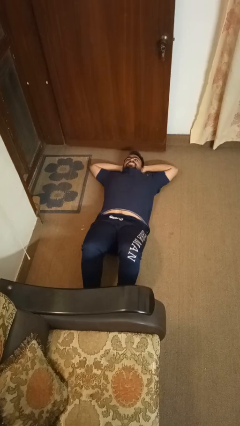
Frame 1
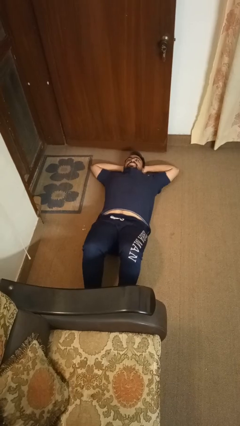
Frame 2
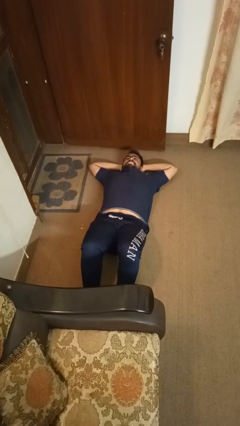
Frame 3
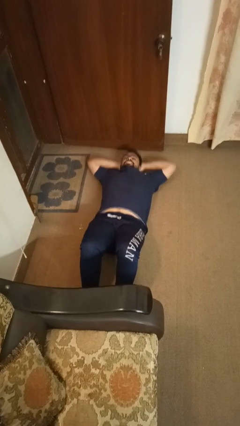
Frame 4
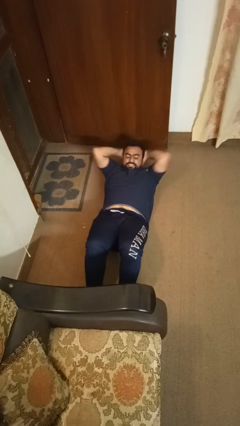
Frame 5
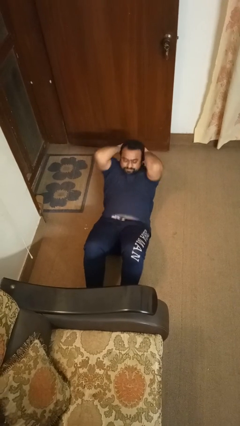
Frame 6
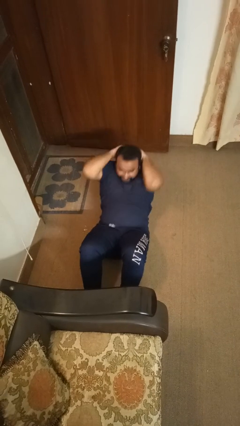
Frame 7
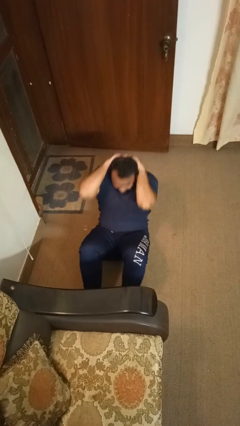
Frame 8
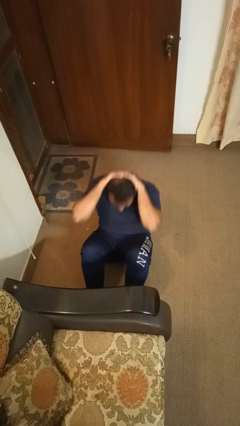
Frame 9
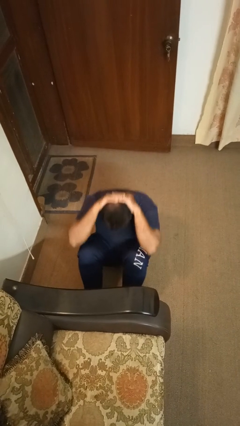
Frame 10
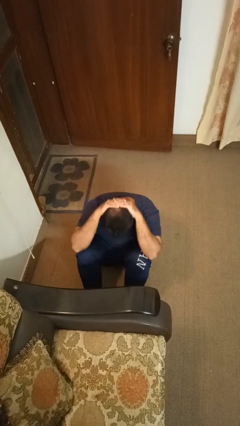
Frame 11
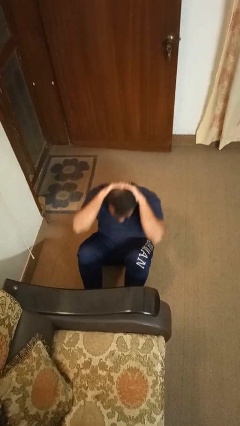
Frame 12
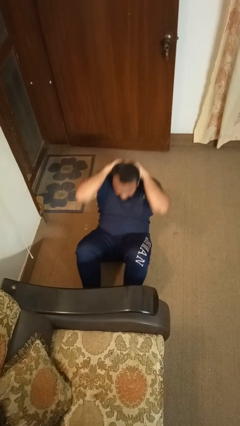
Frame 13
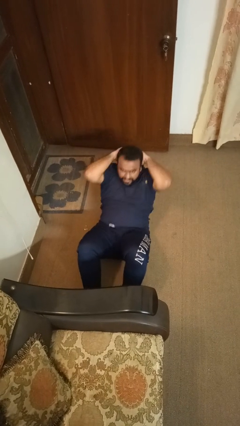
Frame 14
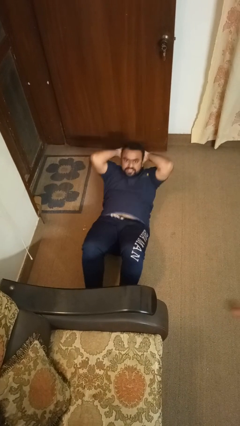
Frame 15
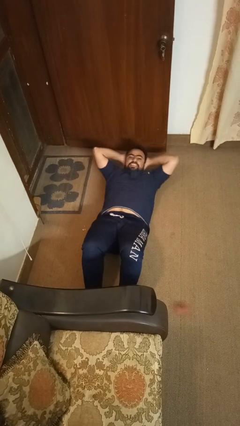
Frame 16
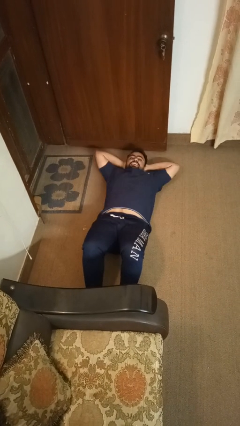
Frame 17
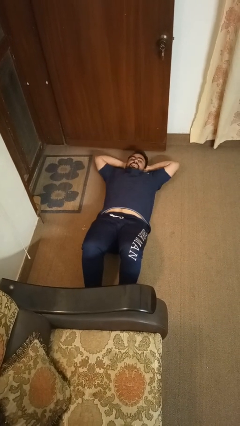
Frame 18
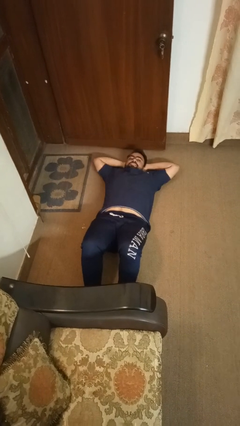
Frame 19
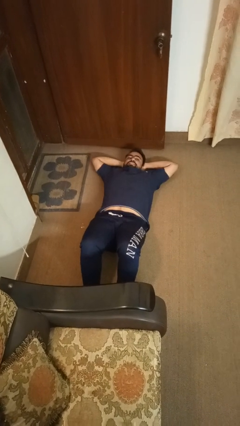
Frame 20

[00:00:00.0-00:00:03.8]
person exercises with situp

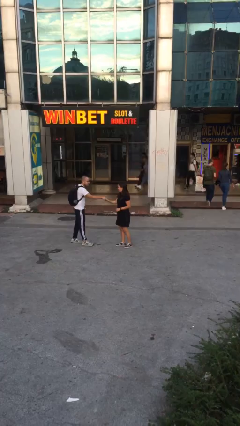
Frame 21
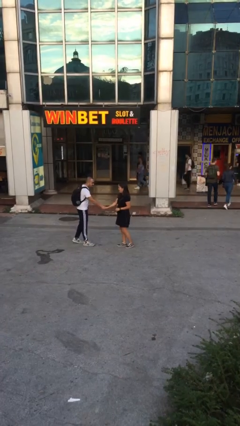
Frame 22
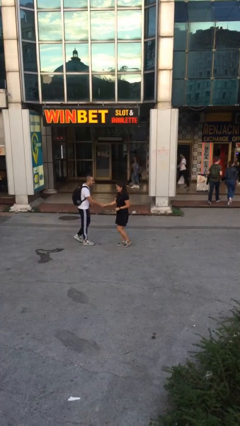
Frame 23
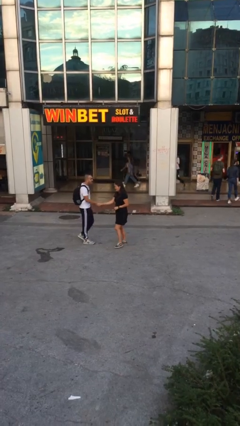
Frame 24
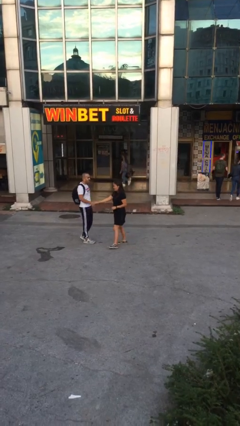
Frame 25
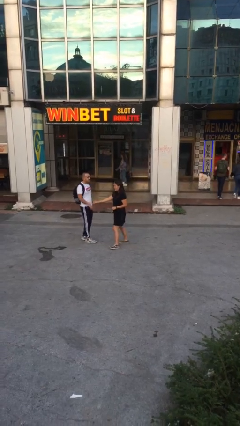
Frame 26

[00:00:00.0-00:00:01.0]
person shakes hand

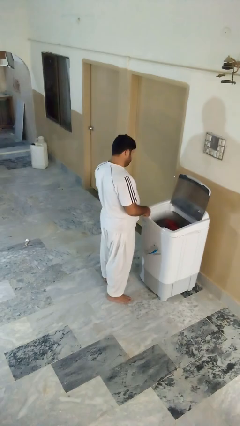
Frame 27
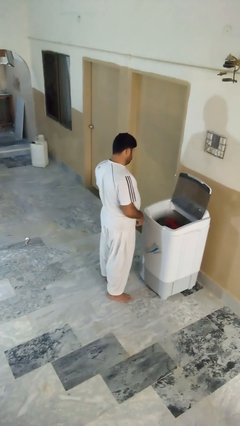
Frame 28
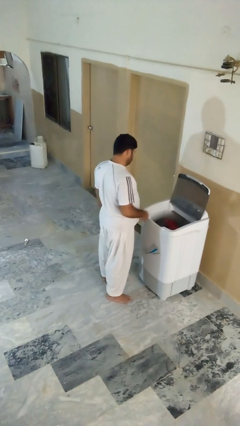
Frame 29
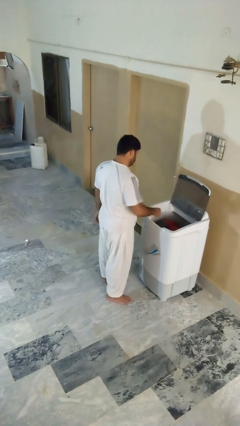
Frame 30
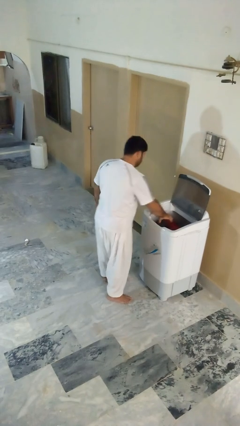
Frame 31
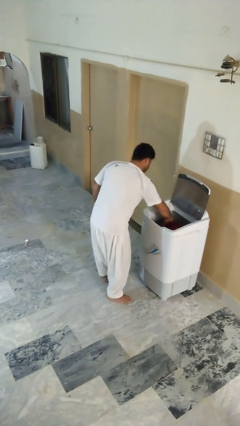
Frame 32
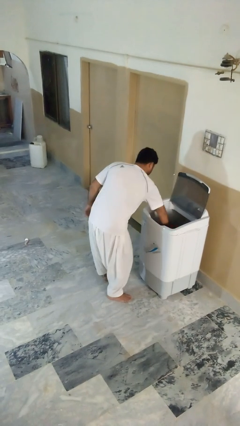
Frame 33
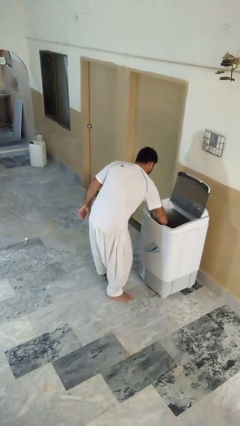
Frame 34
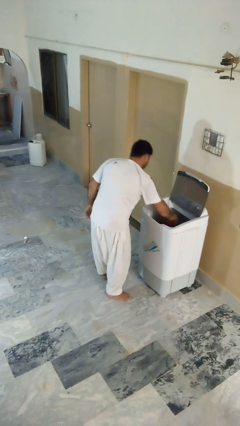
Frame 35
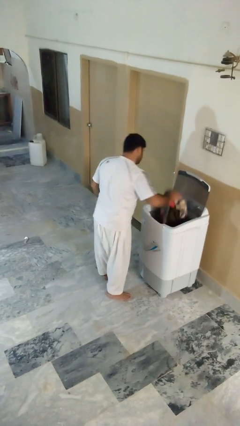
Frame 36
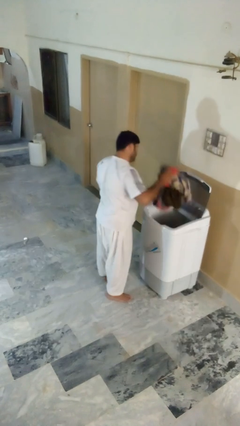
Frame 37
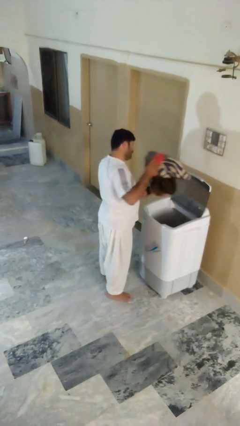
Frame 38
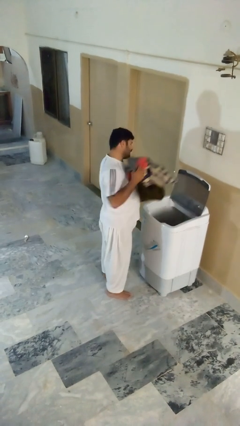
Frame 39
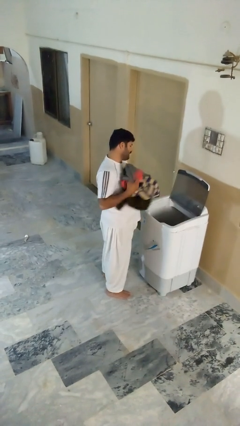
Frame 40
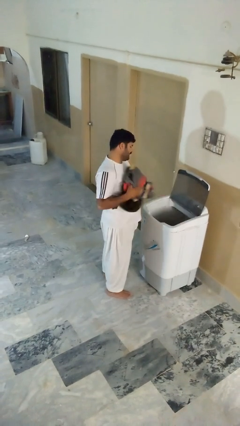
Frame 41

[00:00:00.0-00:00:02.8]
person unloads clotheswasher

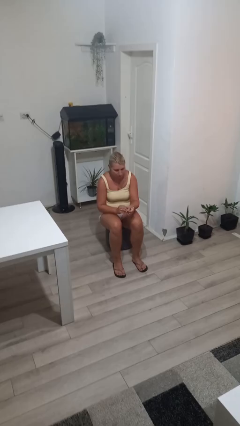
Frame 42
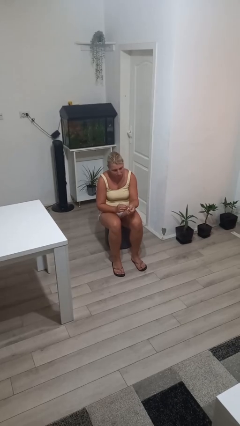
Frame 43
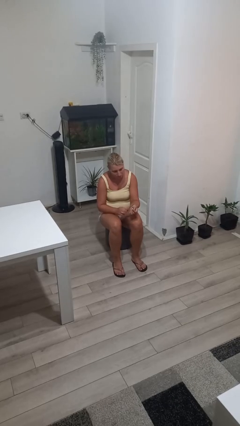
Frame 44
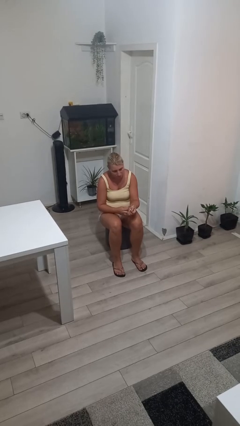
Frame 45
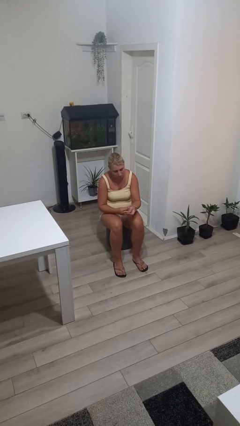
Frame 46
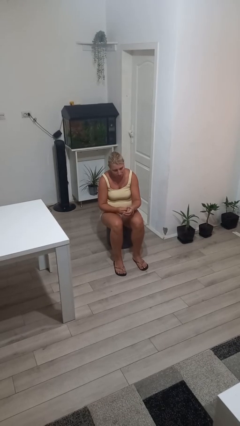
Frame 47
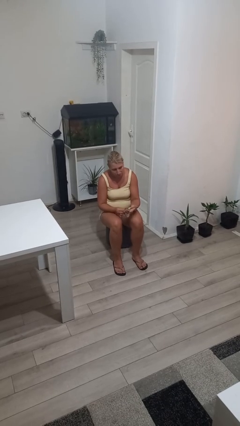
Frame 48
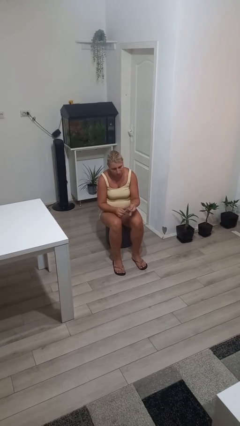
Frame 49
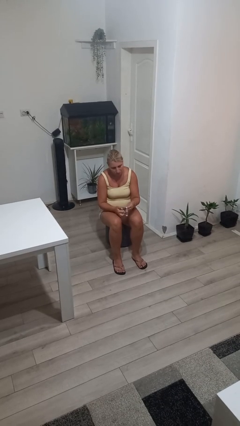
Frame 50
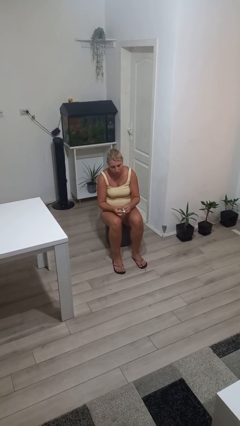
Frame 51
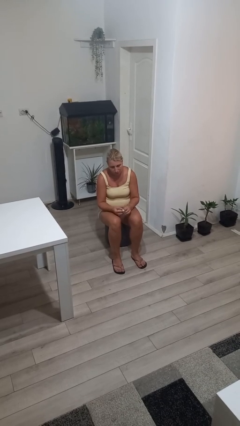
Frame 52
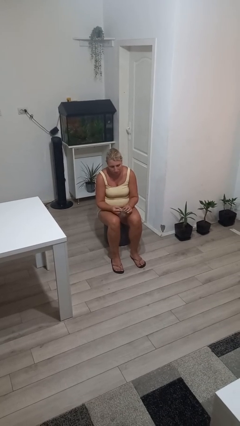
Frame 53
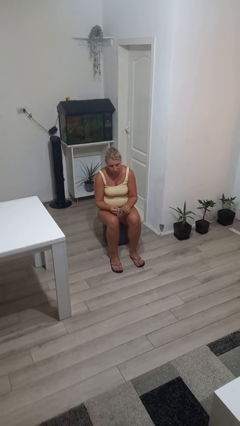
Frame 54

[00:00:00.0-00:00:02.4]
person takes off wristwatch

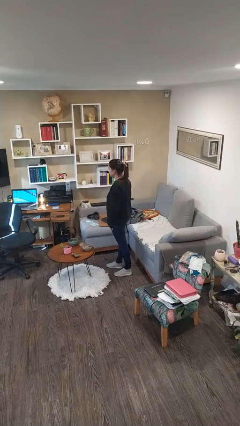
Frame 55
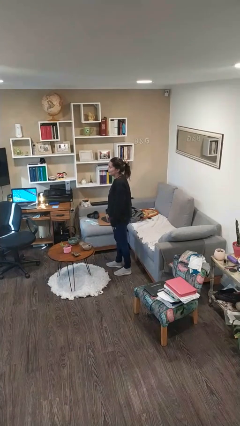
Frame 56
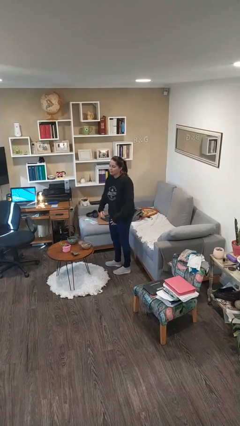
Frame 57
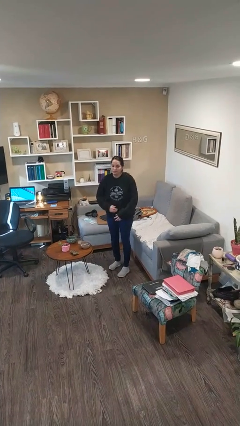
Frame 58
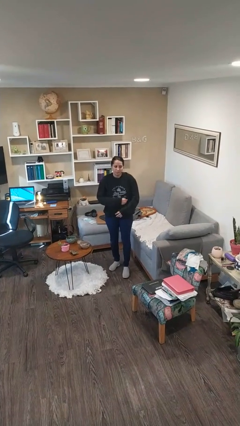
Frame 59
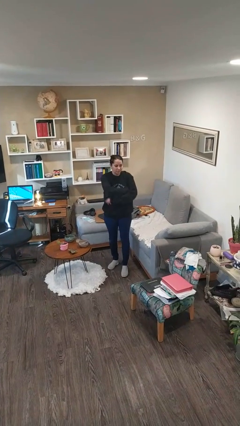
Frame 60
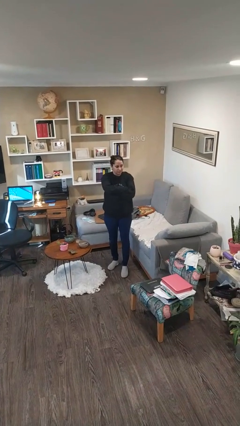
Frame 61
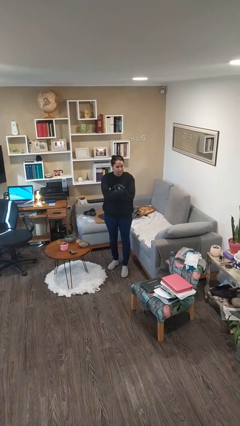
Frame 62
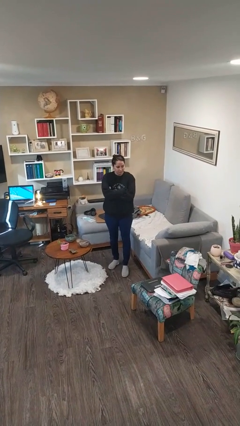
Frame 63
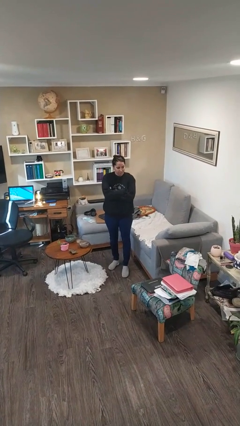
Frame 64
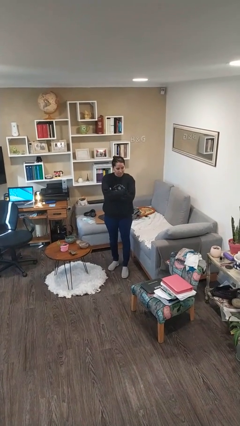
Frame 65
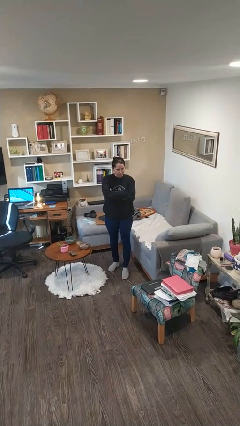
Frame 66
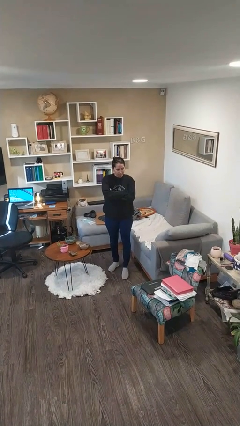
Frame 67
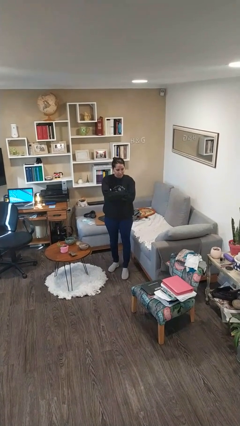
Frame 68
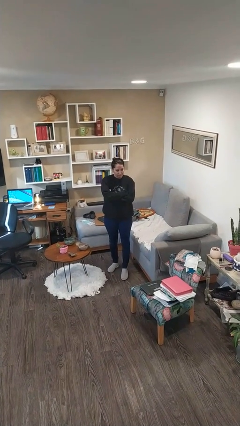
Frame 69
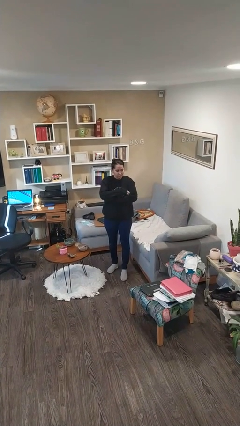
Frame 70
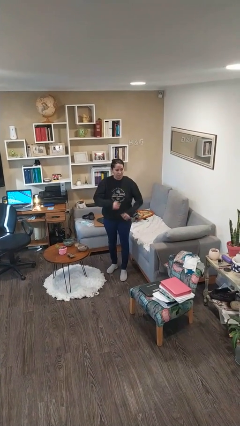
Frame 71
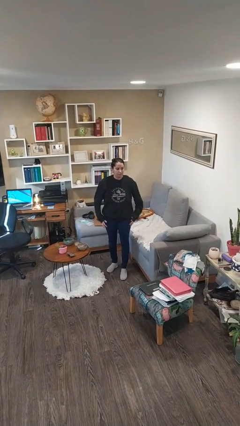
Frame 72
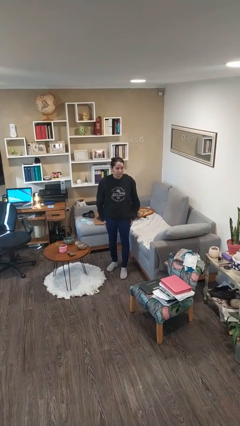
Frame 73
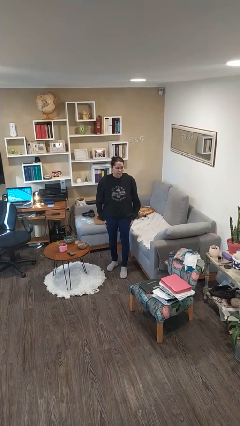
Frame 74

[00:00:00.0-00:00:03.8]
person crosses arms

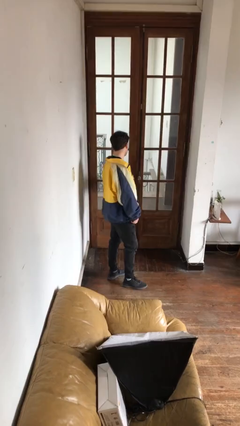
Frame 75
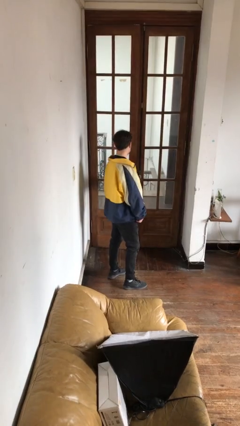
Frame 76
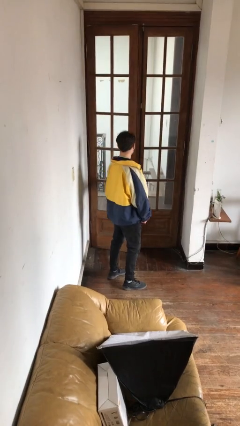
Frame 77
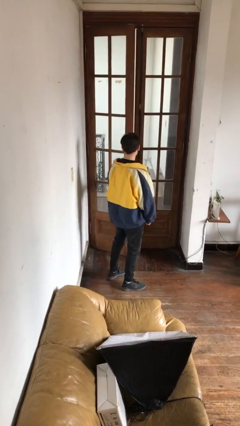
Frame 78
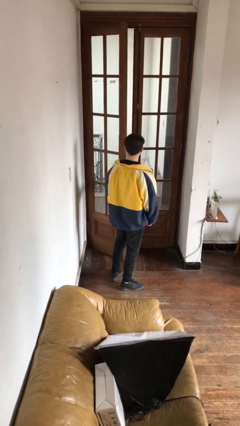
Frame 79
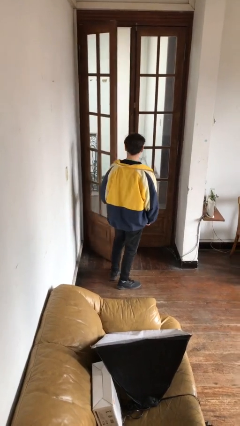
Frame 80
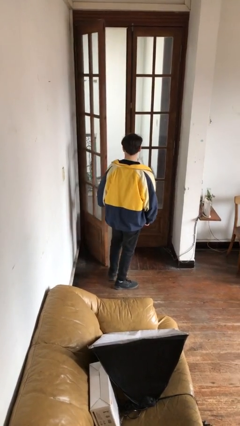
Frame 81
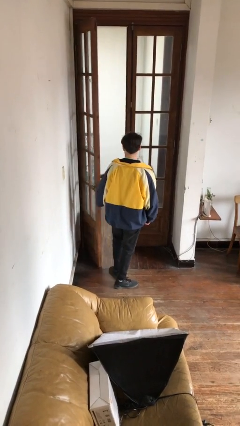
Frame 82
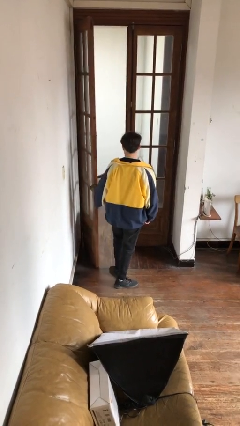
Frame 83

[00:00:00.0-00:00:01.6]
person opens facility door

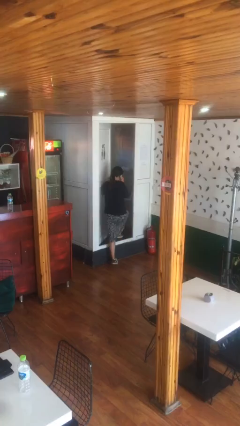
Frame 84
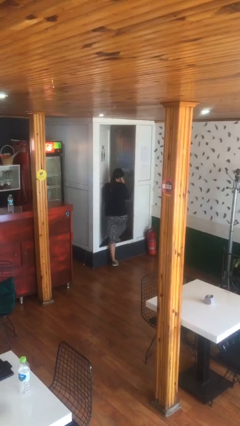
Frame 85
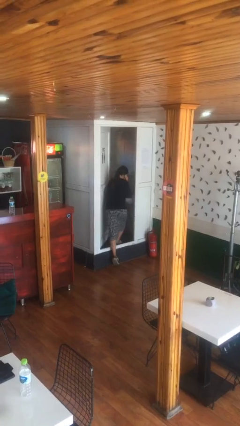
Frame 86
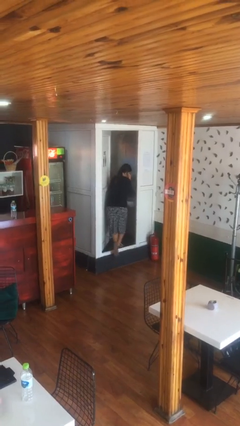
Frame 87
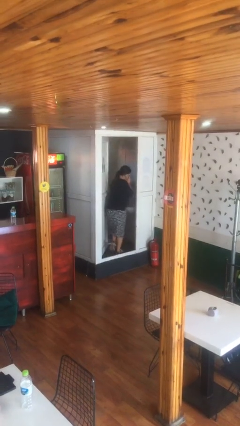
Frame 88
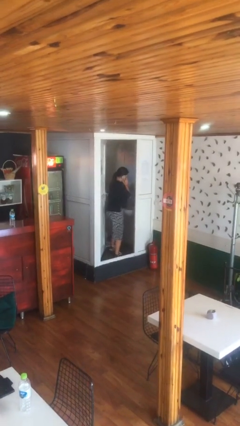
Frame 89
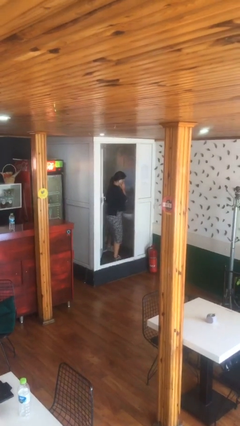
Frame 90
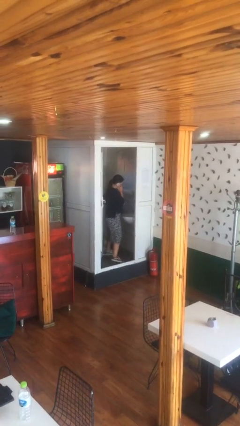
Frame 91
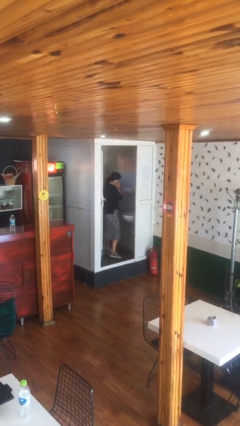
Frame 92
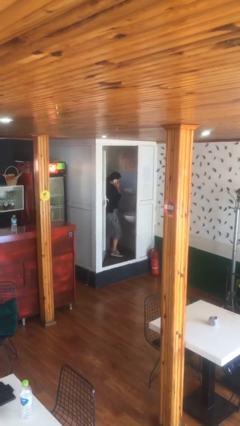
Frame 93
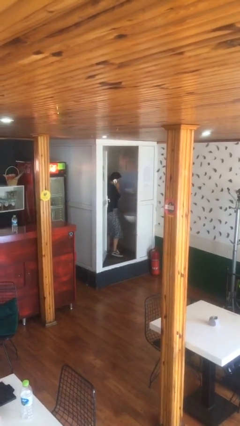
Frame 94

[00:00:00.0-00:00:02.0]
person exits scene through structure
